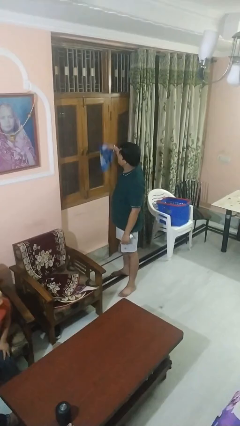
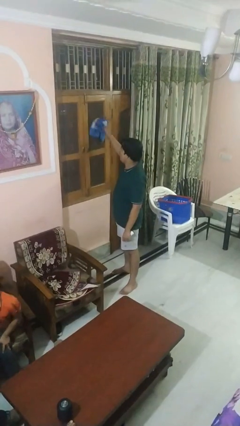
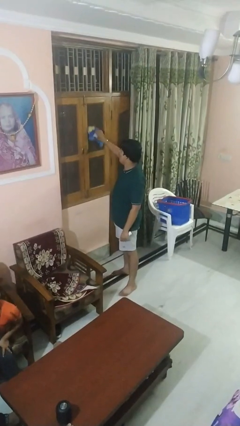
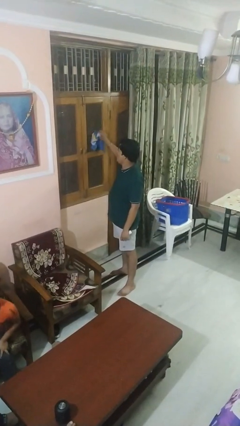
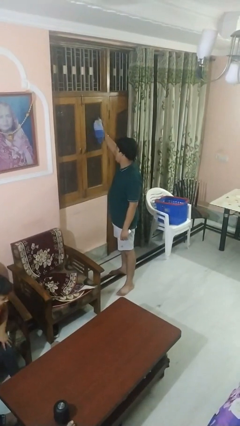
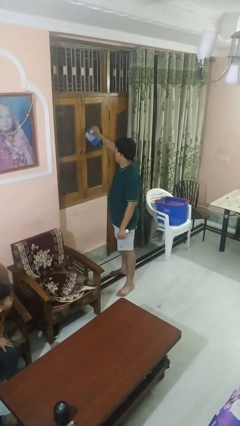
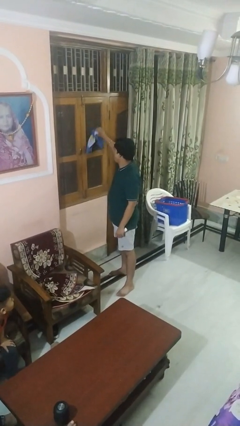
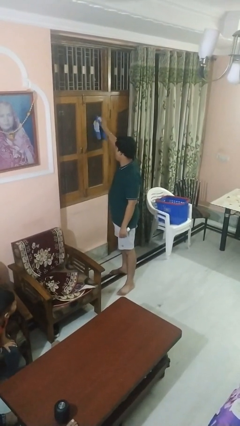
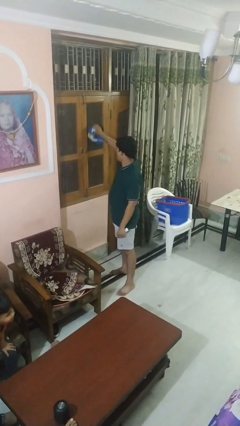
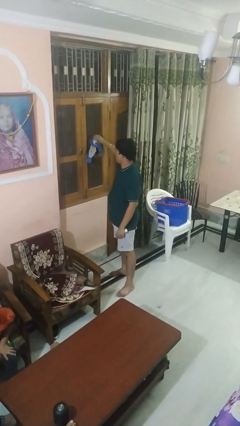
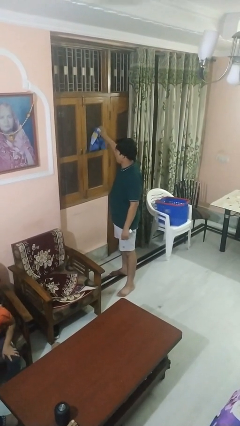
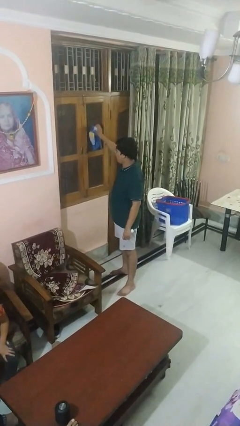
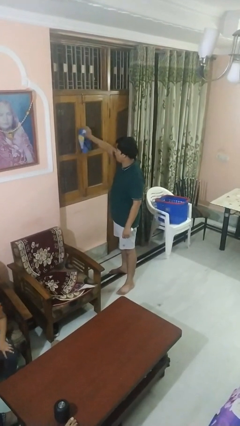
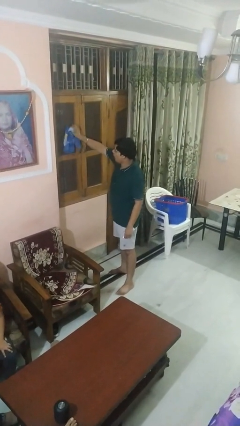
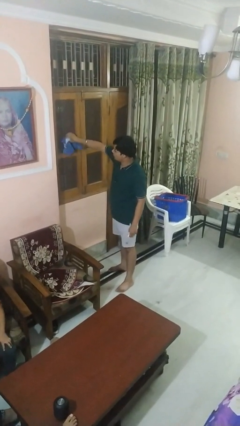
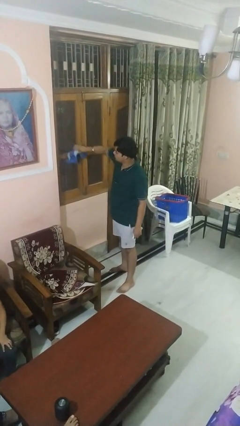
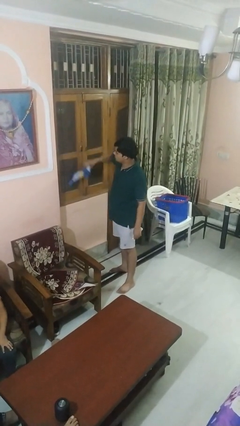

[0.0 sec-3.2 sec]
person washes window

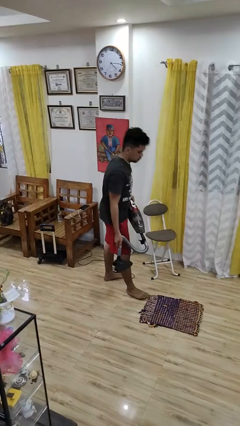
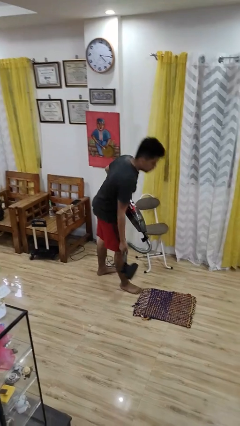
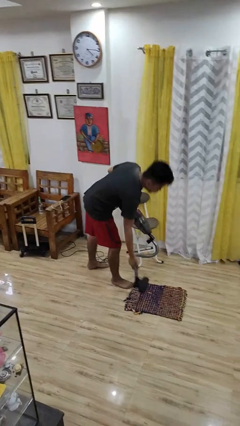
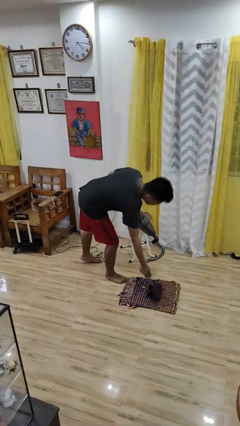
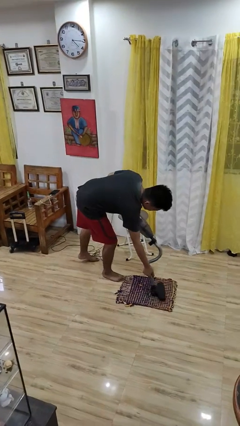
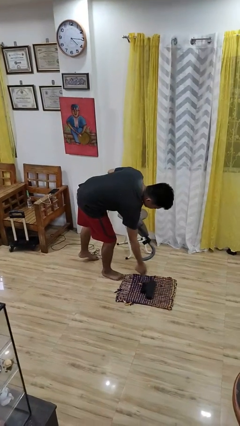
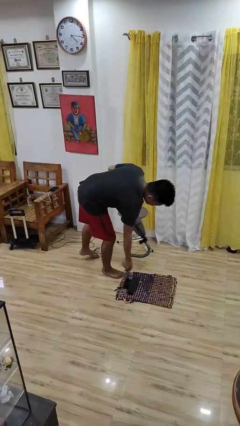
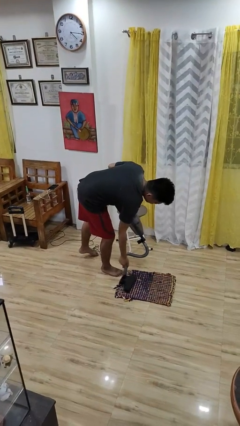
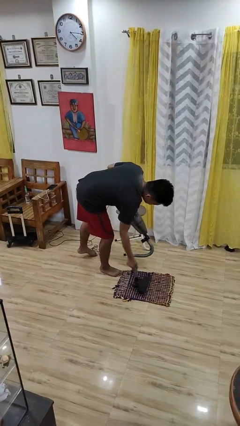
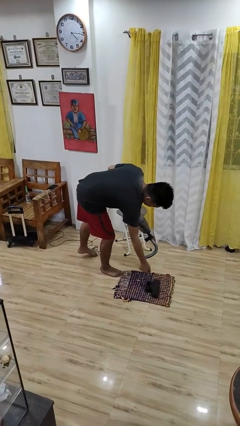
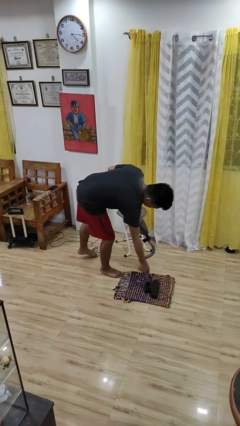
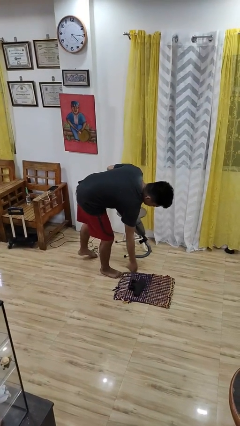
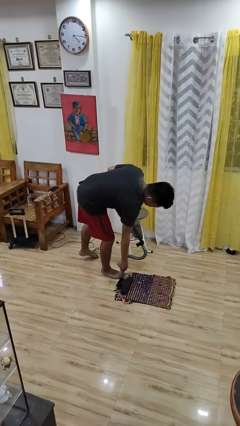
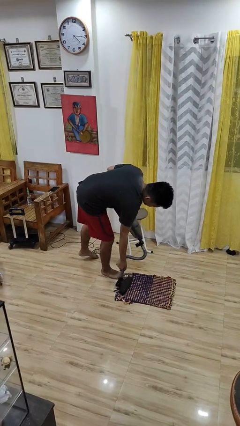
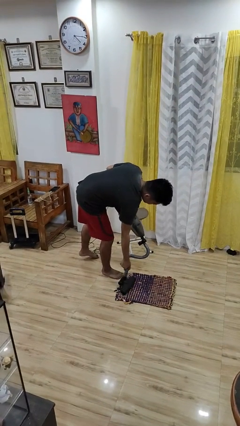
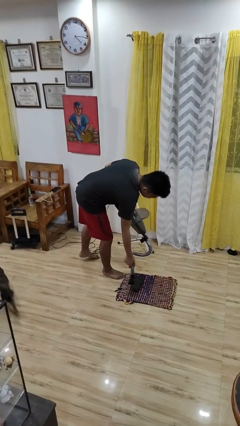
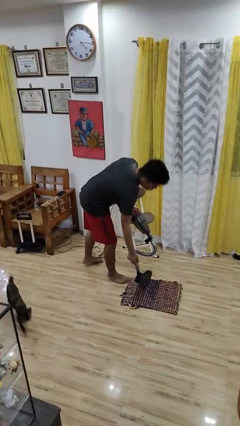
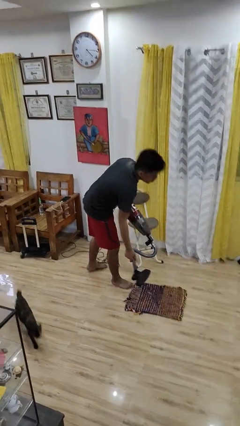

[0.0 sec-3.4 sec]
person vacuums carpet

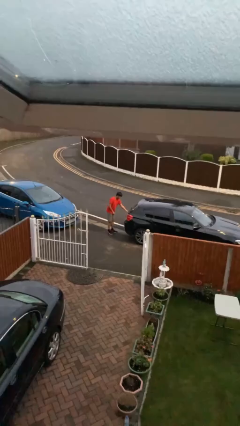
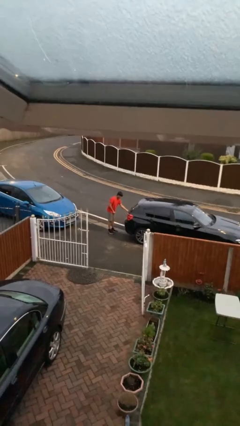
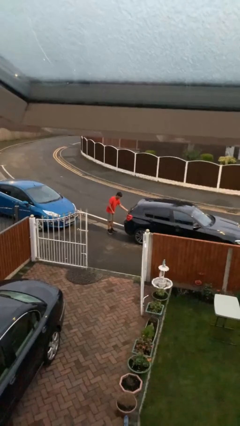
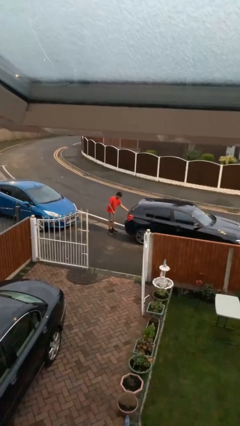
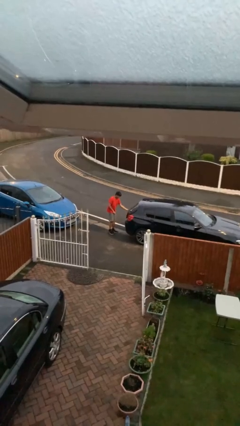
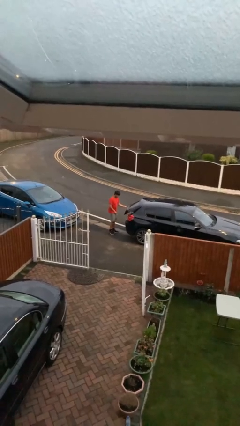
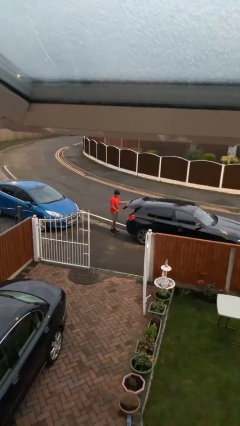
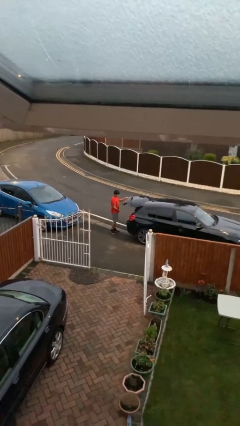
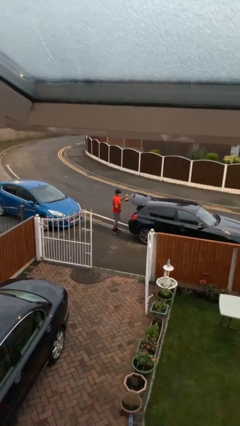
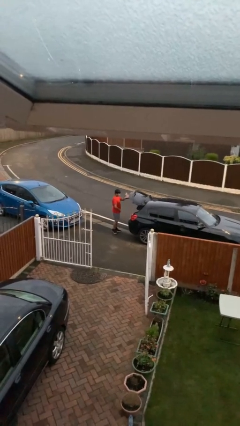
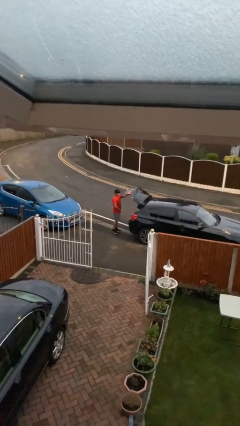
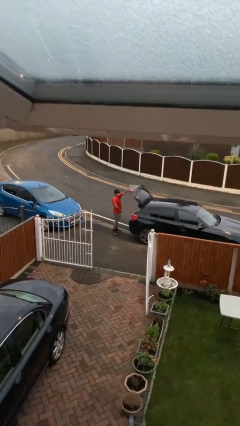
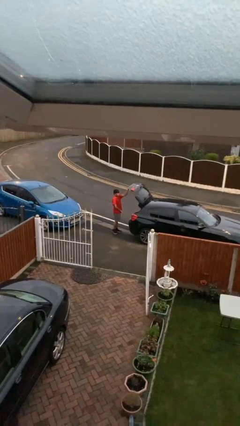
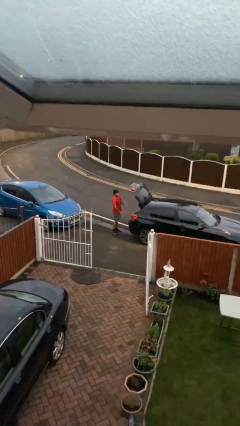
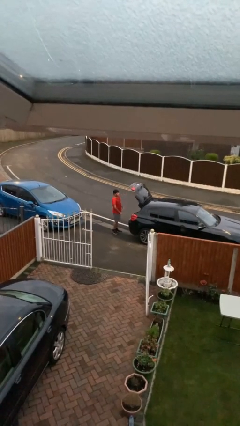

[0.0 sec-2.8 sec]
person opens car trunk

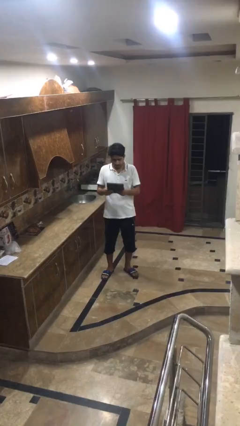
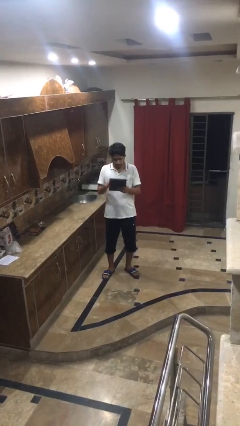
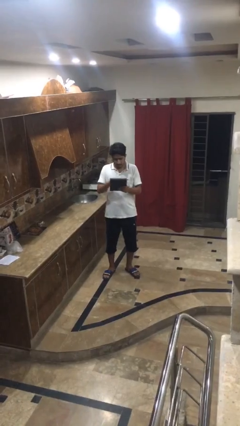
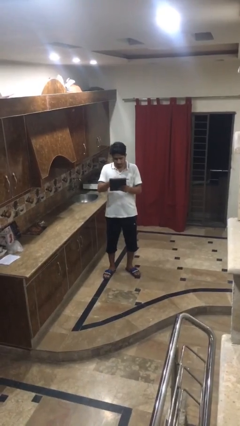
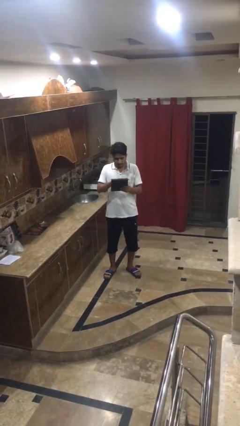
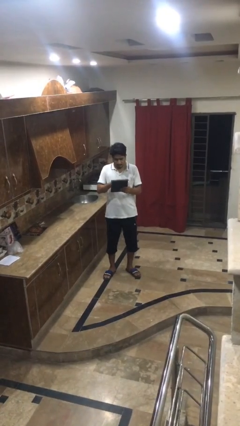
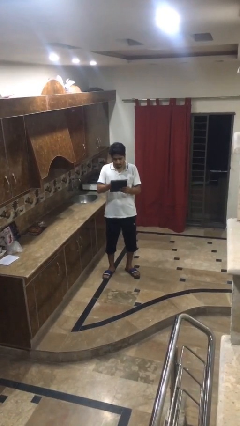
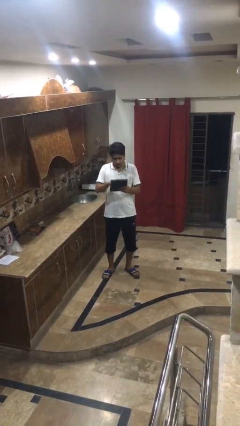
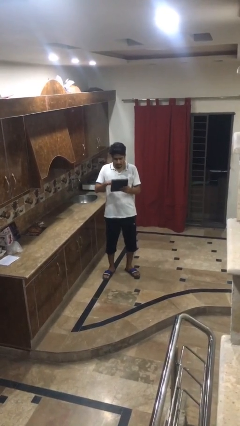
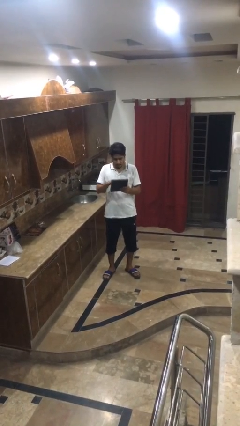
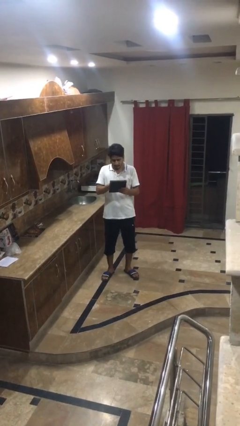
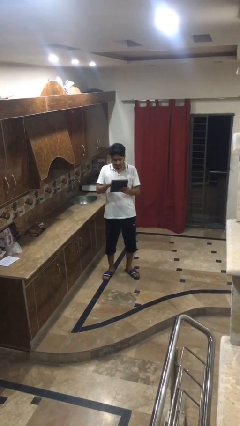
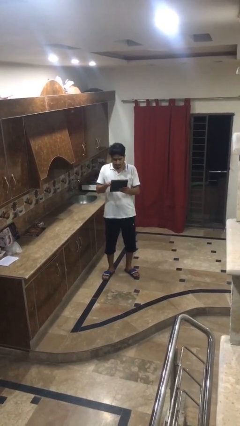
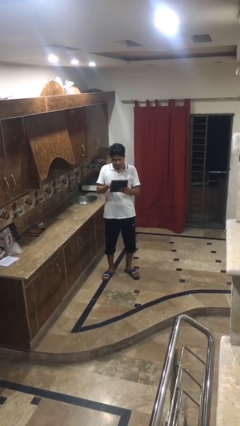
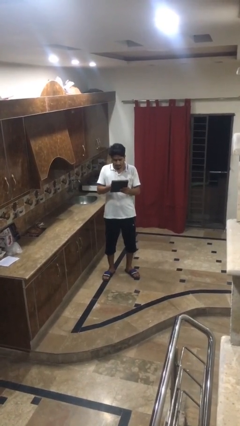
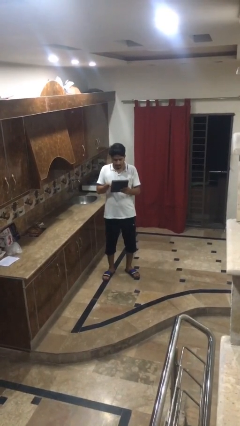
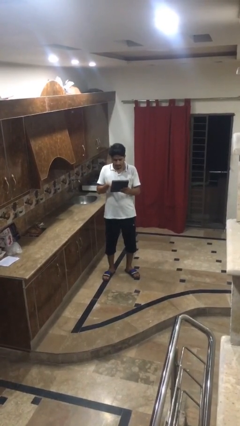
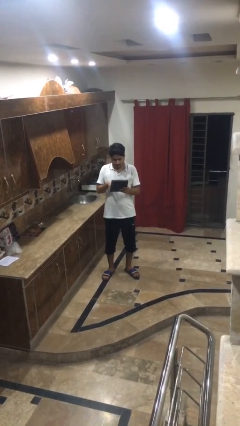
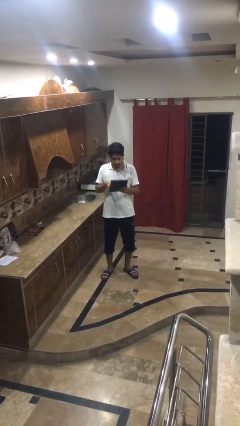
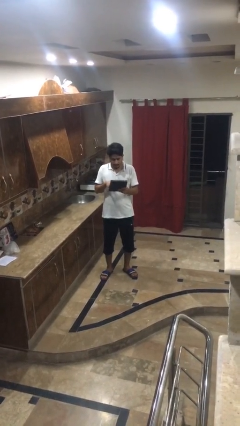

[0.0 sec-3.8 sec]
person interacts with tablet

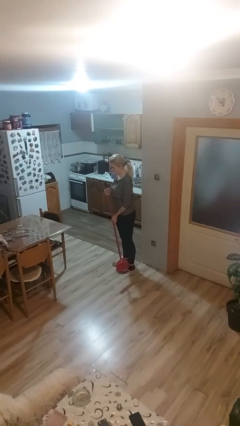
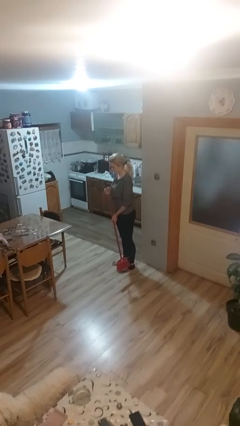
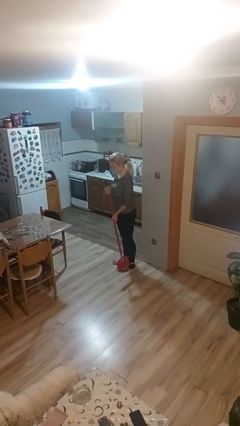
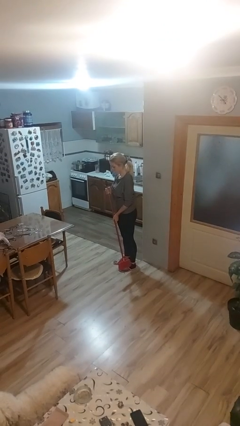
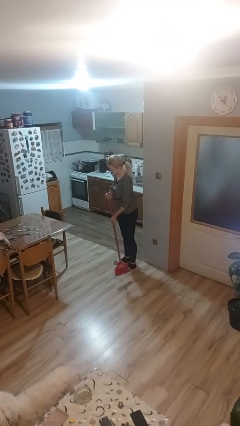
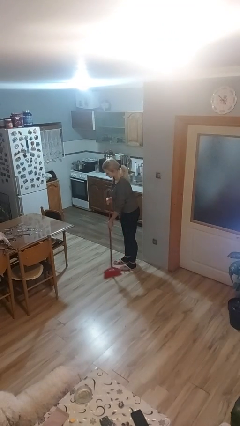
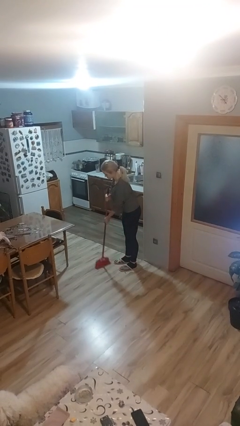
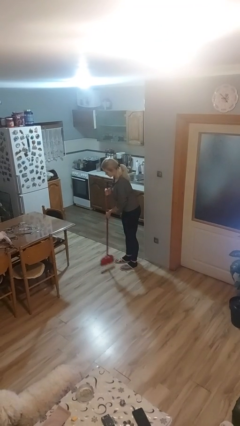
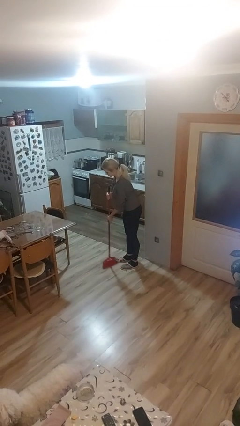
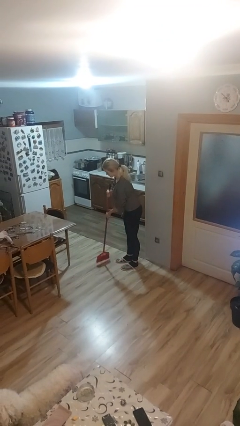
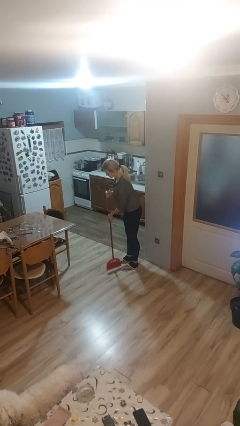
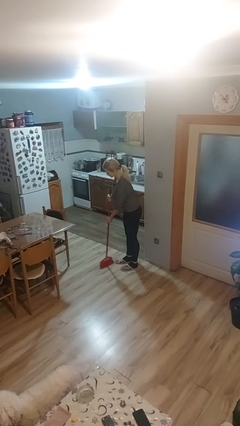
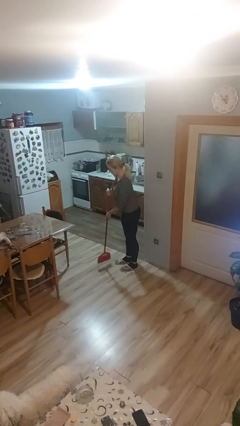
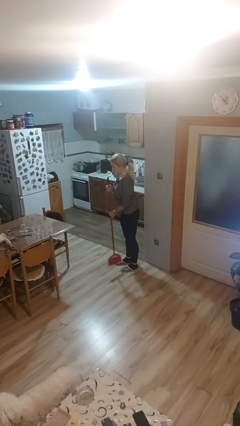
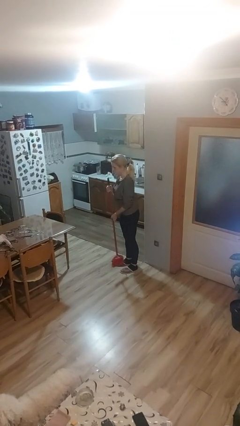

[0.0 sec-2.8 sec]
person sweeps floor

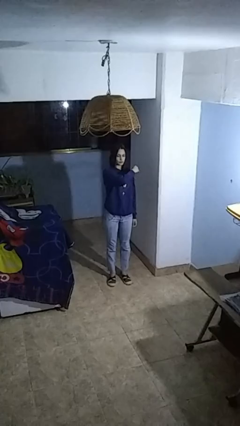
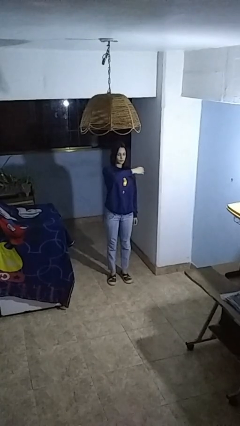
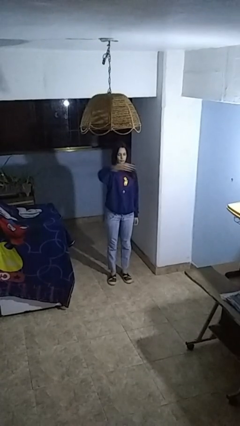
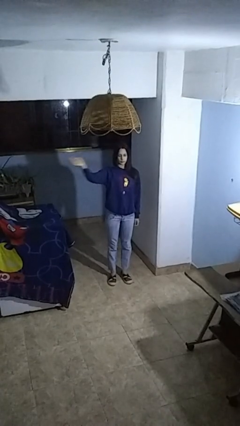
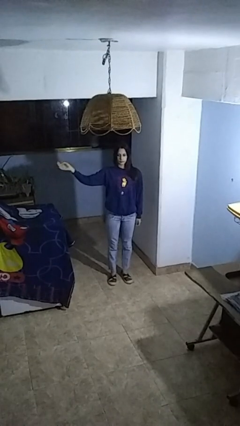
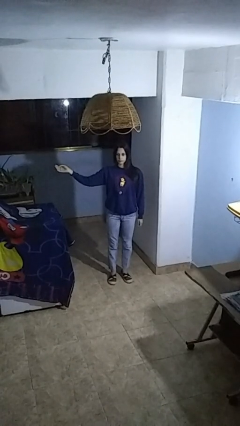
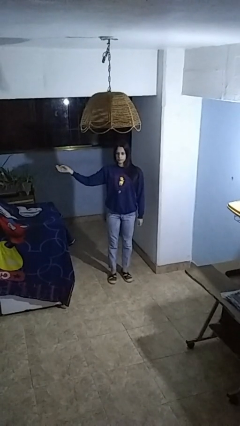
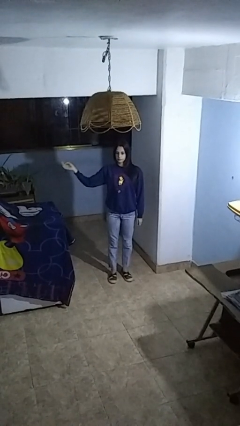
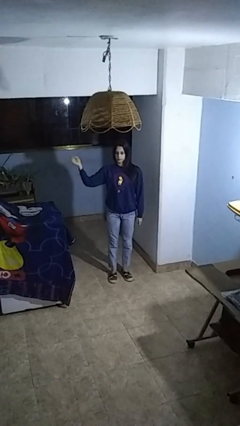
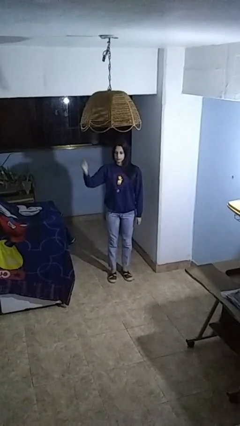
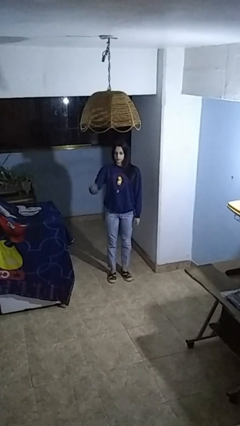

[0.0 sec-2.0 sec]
person gestures swipe right
